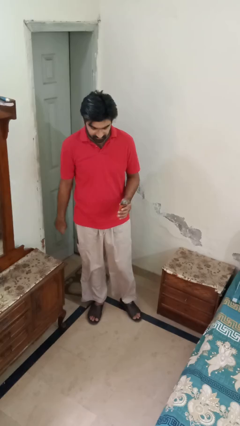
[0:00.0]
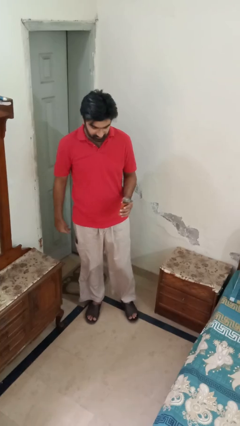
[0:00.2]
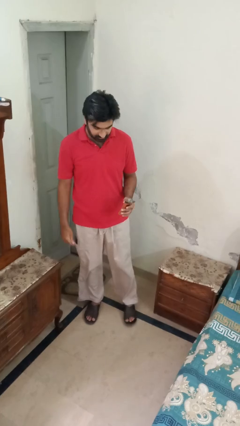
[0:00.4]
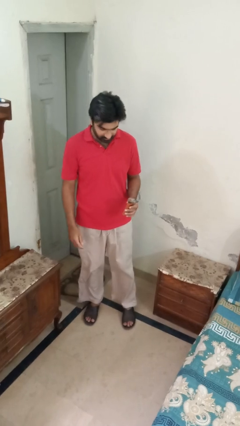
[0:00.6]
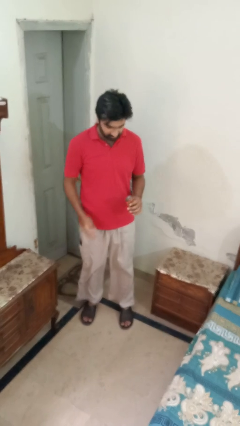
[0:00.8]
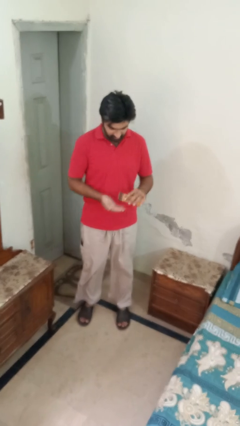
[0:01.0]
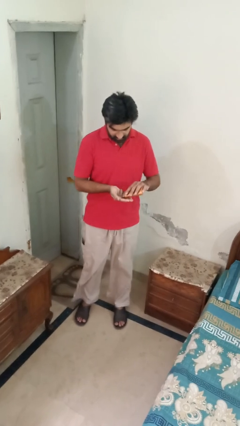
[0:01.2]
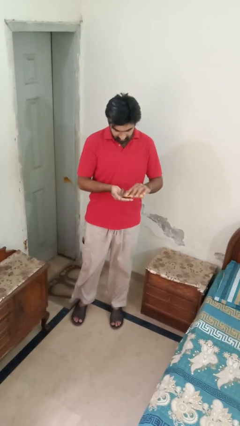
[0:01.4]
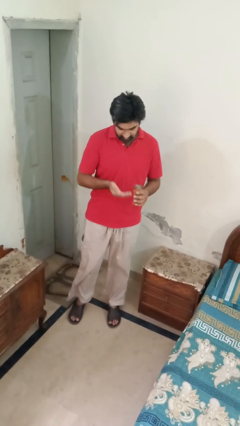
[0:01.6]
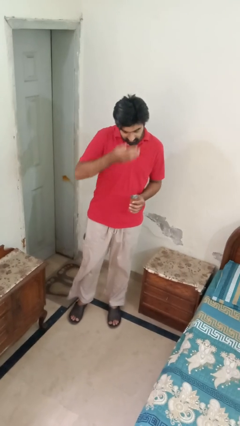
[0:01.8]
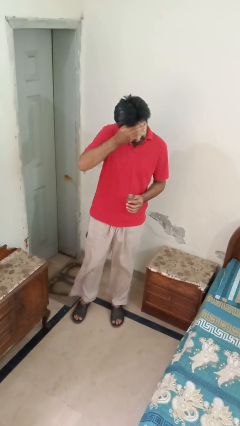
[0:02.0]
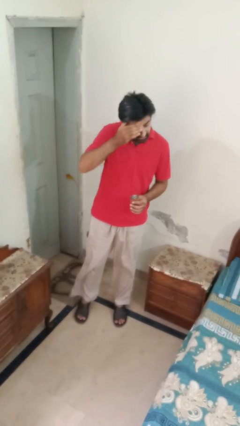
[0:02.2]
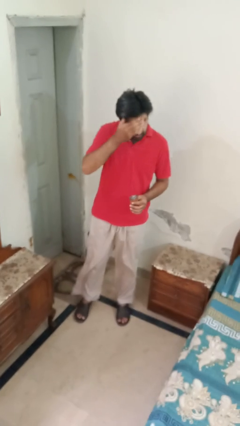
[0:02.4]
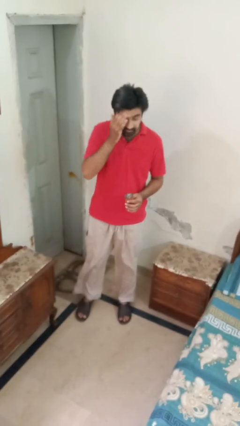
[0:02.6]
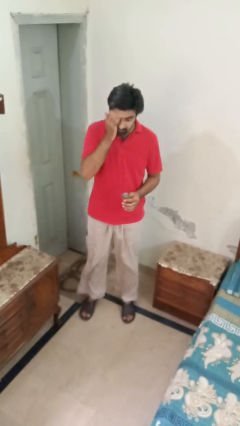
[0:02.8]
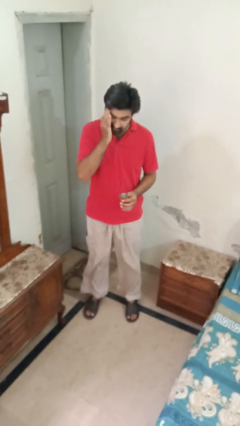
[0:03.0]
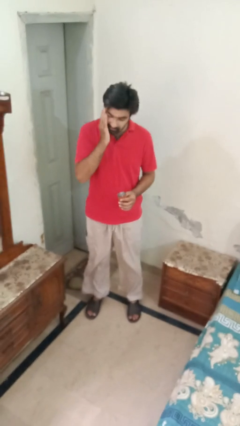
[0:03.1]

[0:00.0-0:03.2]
person applies sunscreen

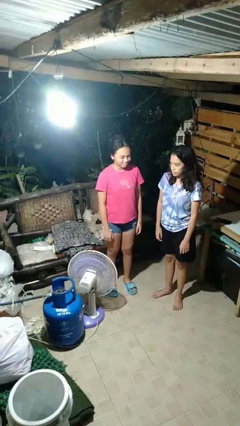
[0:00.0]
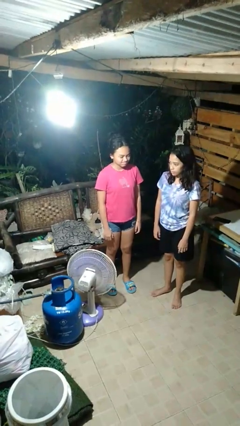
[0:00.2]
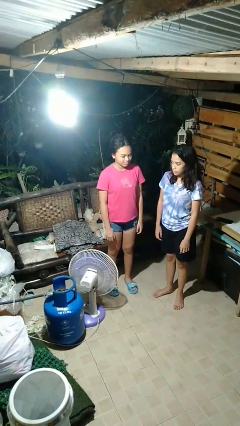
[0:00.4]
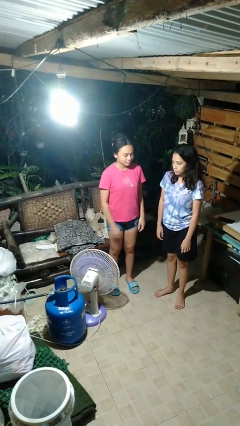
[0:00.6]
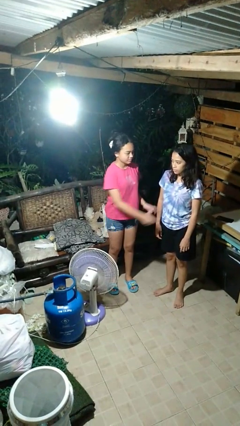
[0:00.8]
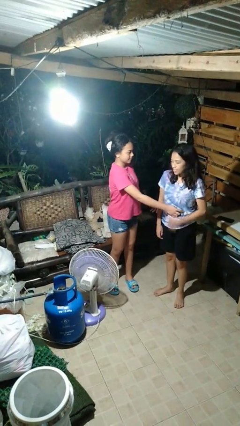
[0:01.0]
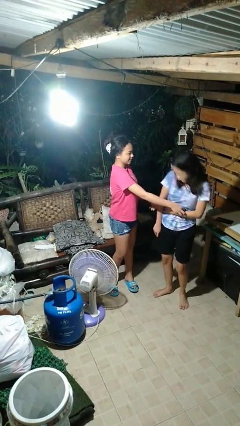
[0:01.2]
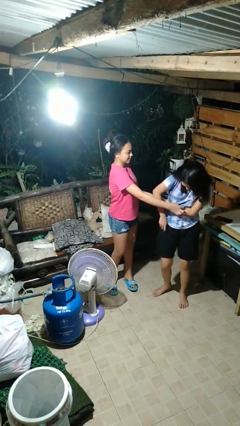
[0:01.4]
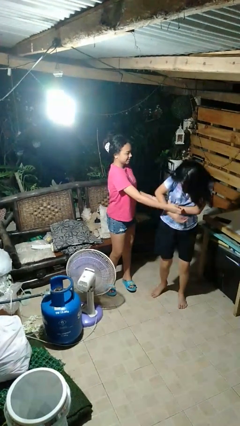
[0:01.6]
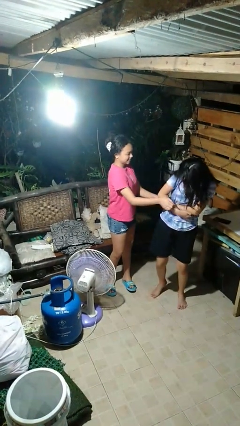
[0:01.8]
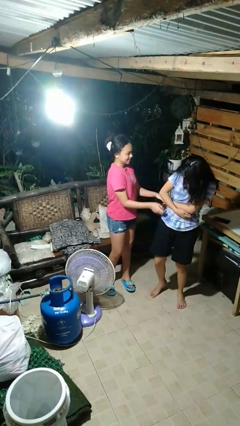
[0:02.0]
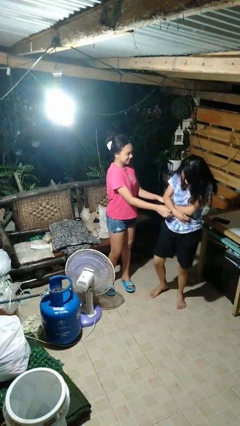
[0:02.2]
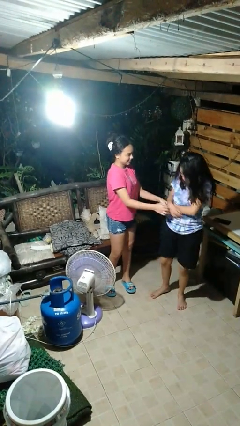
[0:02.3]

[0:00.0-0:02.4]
person tickles person

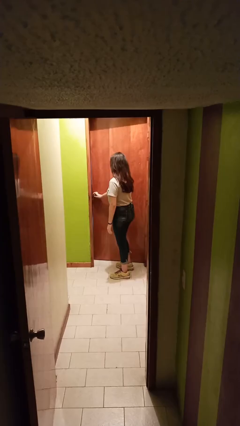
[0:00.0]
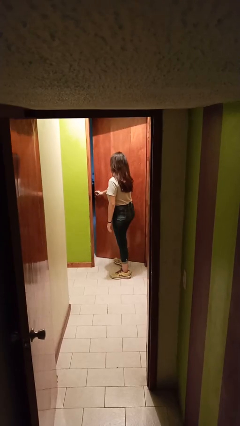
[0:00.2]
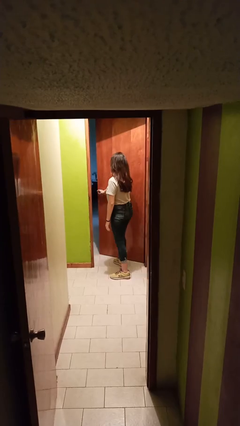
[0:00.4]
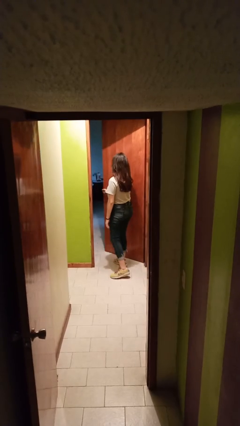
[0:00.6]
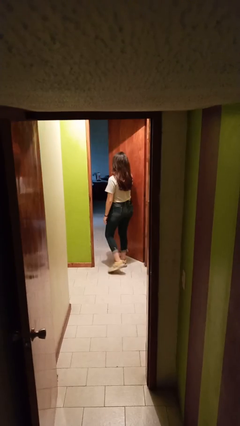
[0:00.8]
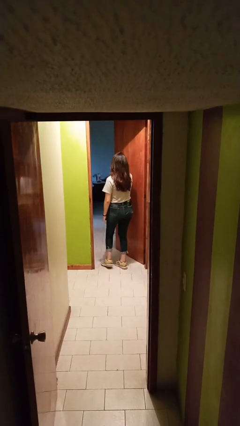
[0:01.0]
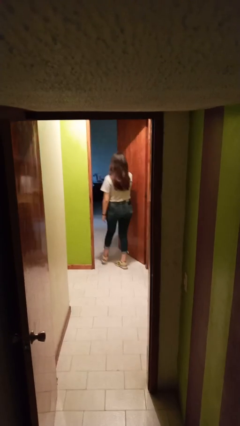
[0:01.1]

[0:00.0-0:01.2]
person opens facility door

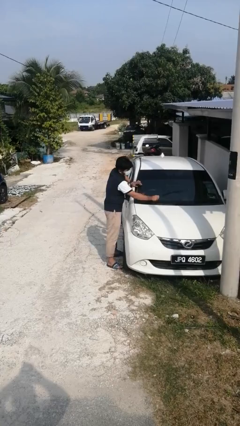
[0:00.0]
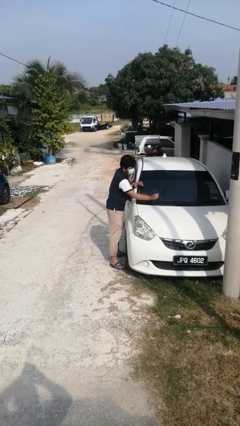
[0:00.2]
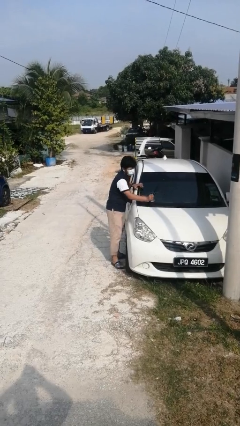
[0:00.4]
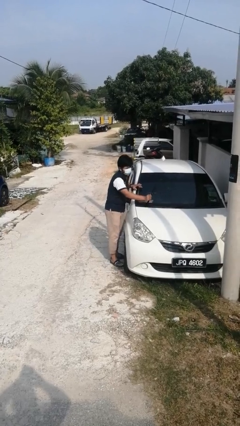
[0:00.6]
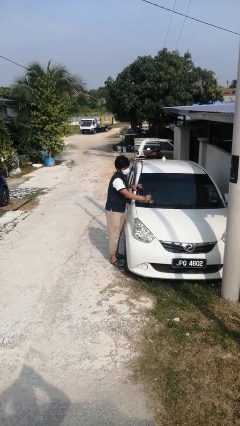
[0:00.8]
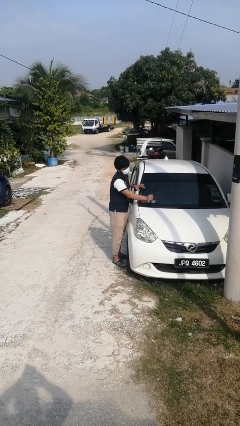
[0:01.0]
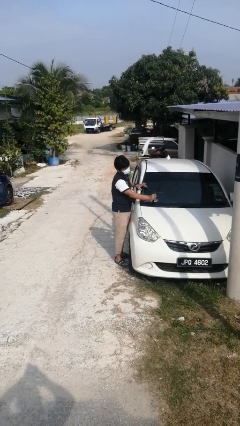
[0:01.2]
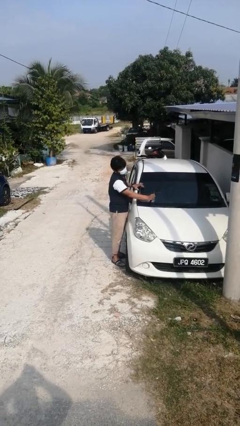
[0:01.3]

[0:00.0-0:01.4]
person flips up car wipers

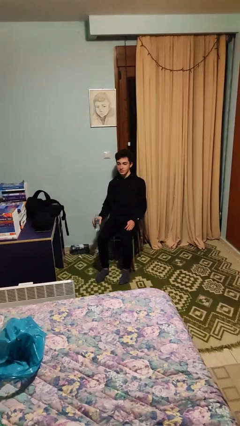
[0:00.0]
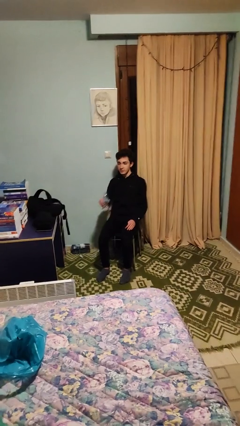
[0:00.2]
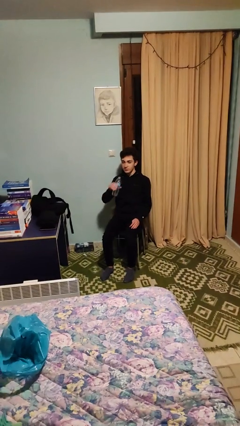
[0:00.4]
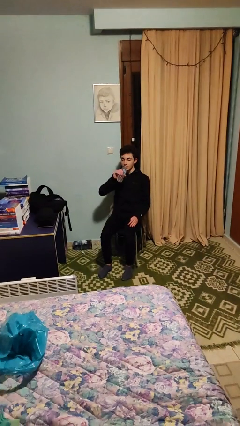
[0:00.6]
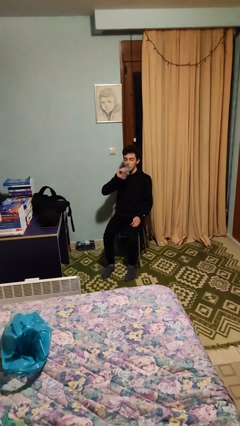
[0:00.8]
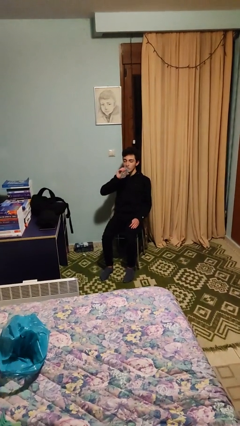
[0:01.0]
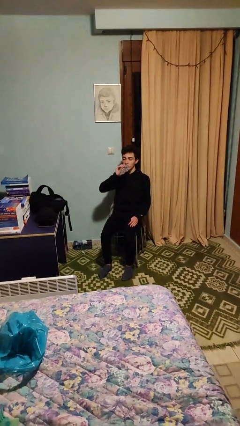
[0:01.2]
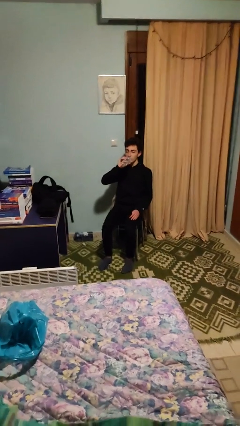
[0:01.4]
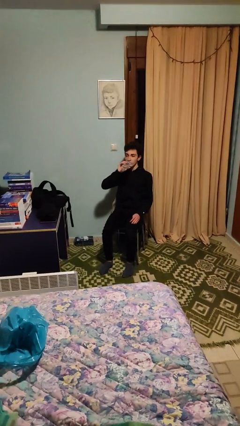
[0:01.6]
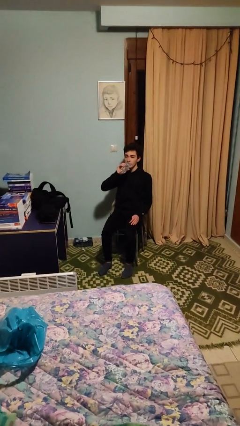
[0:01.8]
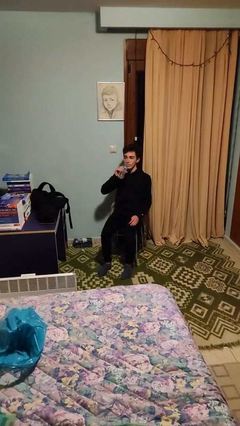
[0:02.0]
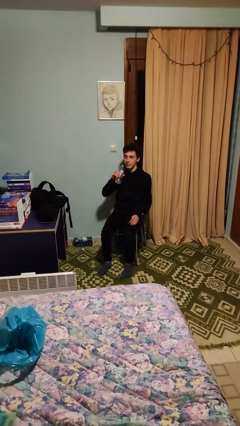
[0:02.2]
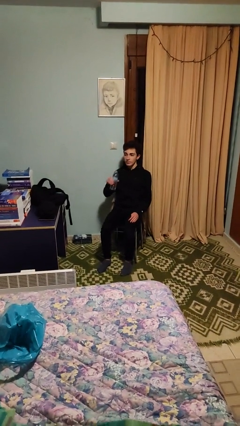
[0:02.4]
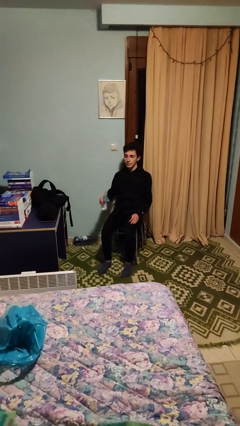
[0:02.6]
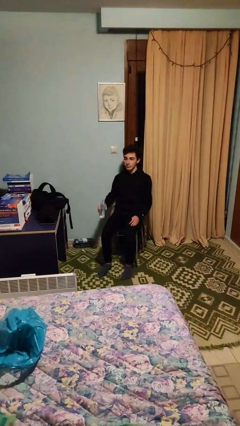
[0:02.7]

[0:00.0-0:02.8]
person drinks from bottle

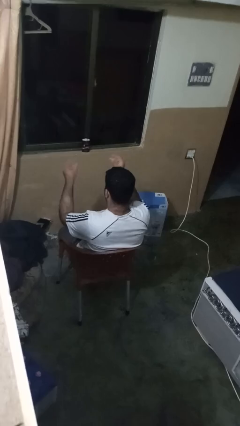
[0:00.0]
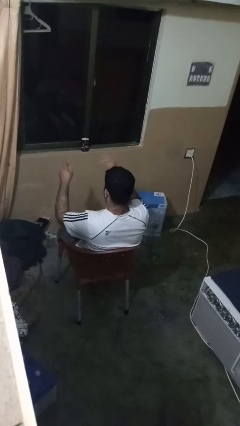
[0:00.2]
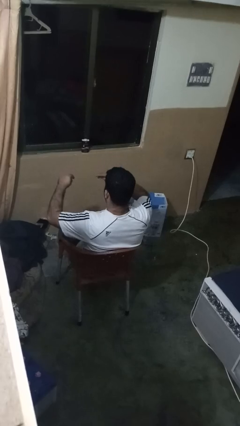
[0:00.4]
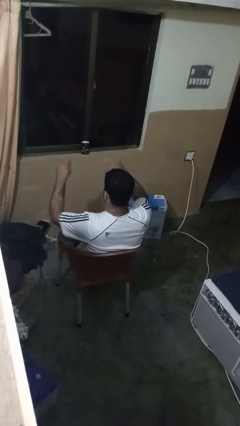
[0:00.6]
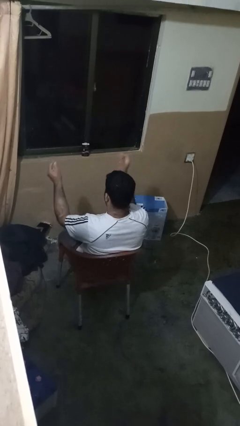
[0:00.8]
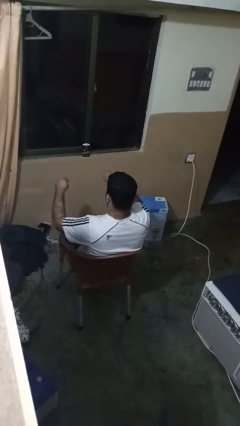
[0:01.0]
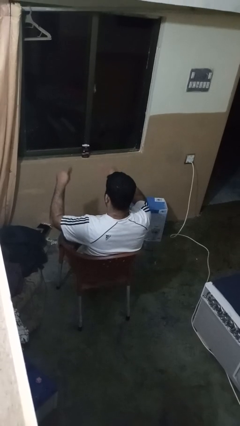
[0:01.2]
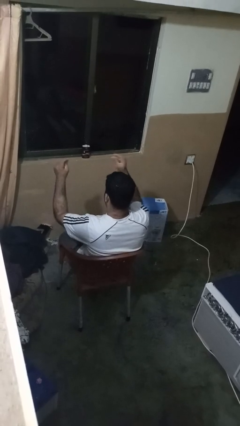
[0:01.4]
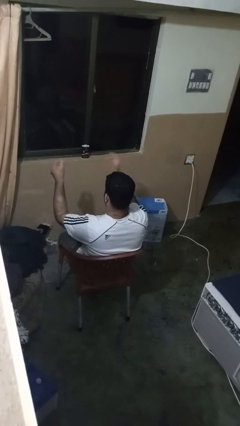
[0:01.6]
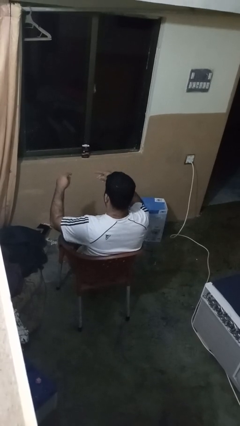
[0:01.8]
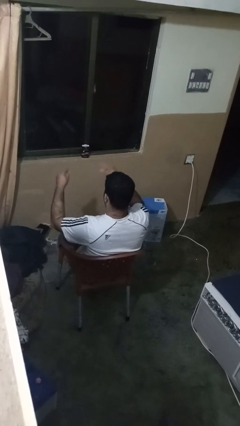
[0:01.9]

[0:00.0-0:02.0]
person snaps fingers

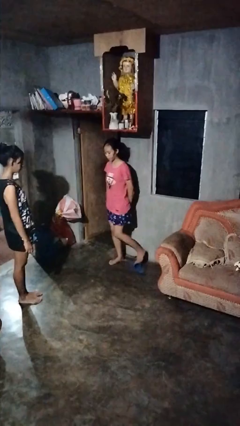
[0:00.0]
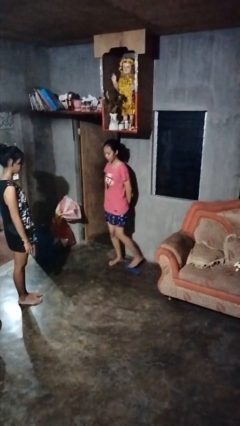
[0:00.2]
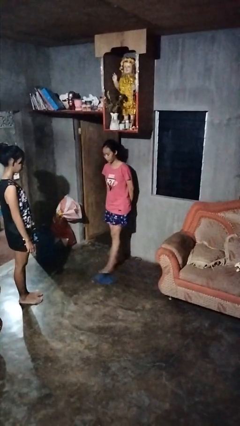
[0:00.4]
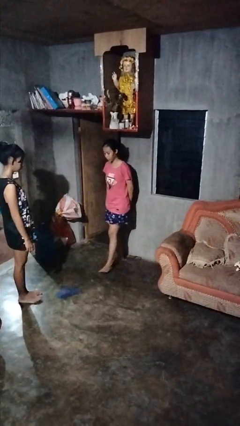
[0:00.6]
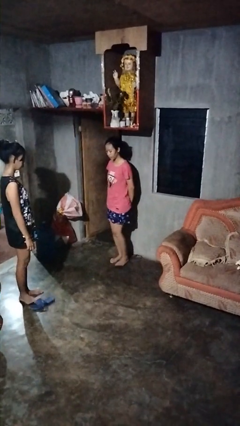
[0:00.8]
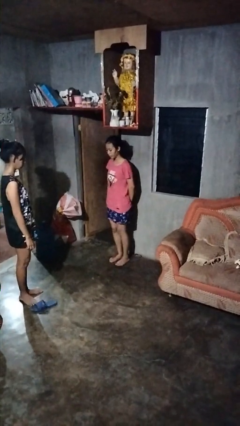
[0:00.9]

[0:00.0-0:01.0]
person kicks object to person

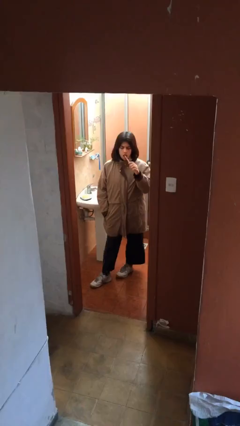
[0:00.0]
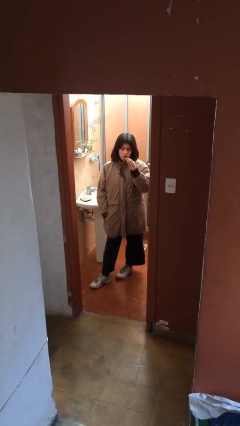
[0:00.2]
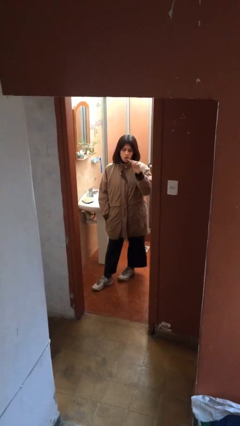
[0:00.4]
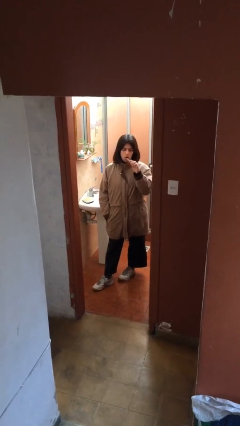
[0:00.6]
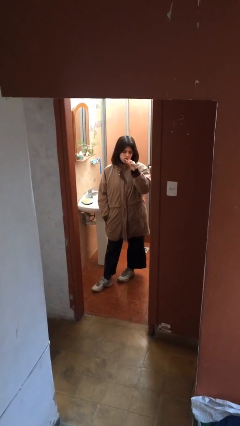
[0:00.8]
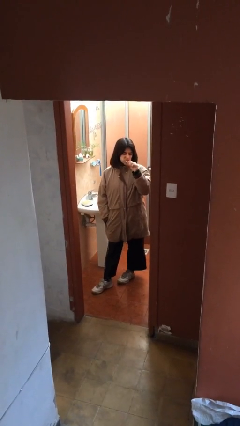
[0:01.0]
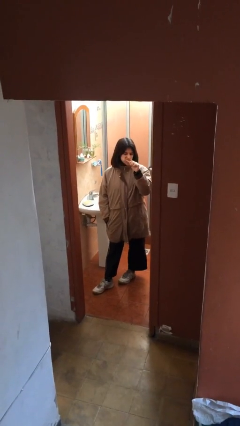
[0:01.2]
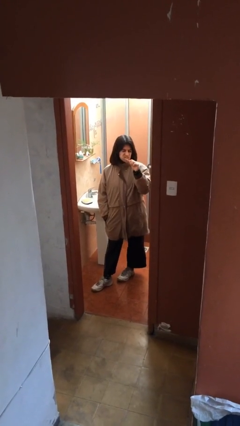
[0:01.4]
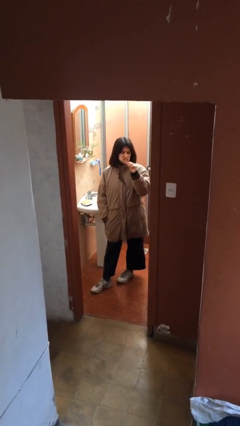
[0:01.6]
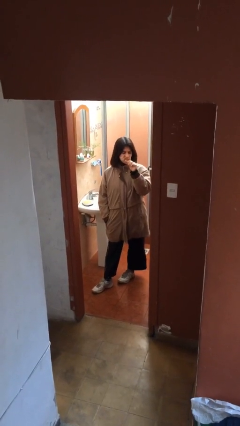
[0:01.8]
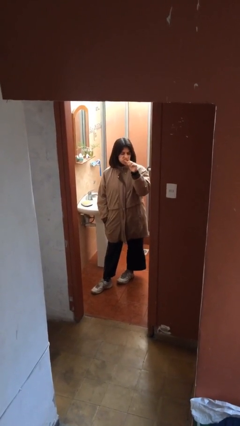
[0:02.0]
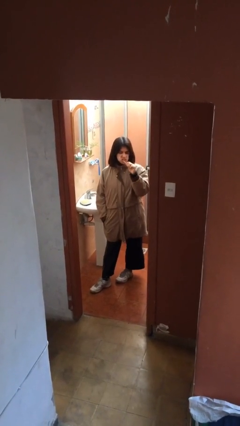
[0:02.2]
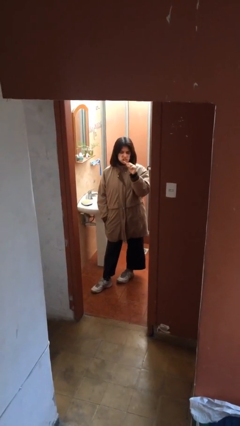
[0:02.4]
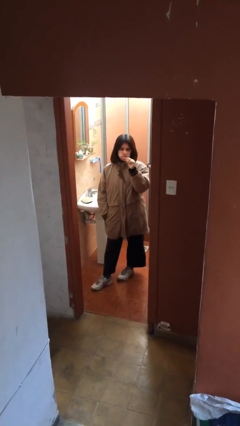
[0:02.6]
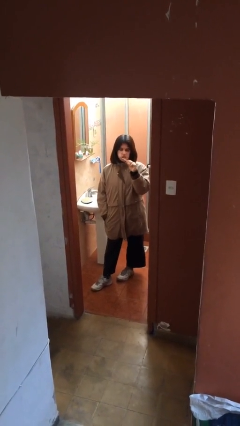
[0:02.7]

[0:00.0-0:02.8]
person brushes teeth

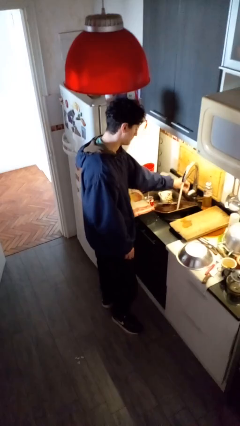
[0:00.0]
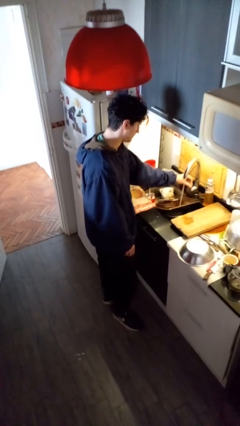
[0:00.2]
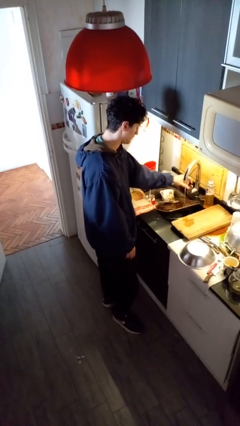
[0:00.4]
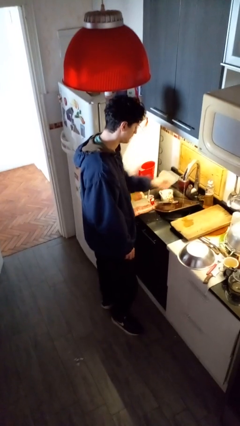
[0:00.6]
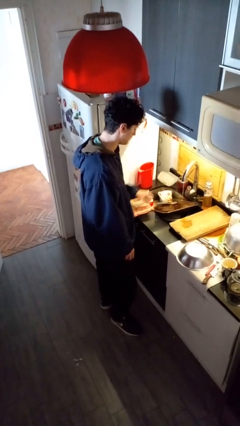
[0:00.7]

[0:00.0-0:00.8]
person turns off faucet
